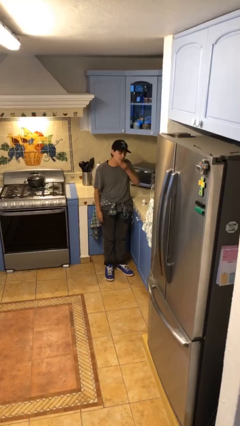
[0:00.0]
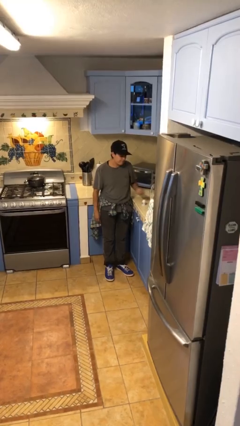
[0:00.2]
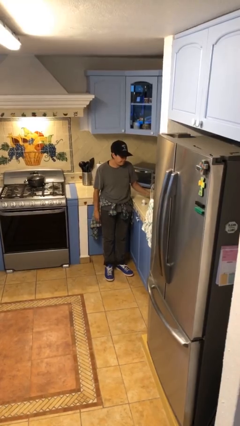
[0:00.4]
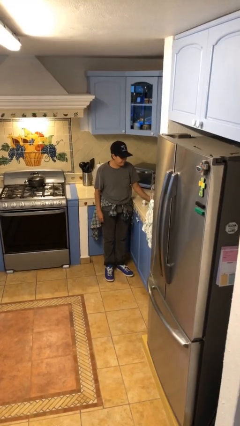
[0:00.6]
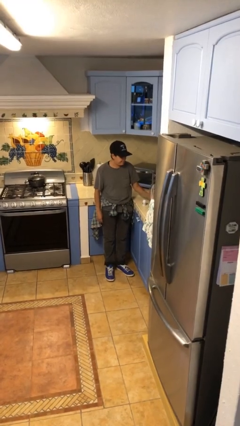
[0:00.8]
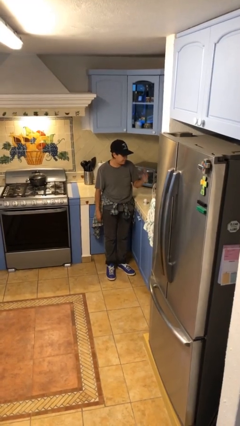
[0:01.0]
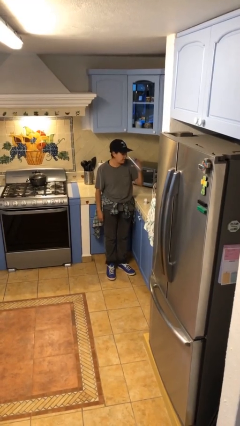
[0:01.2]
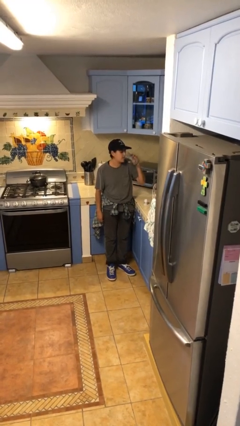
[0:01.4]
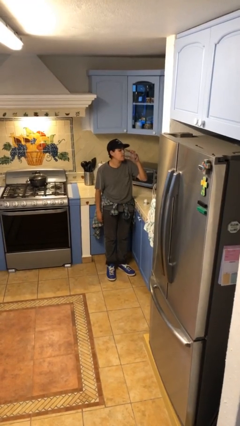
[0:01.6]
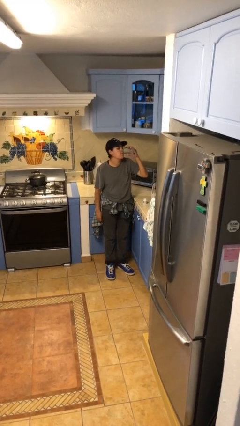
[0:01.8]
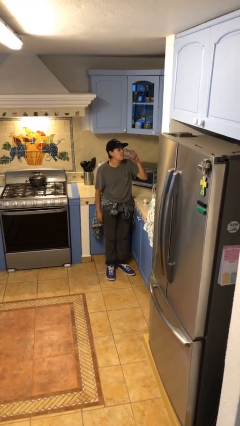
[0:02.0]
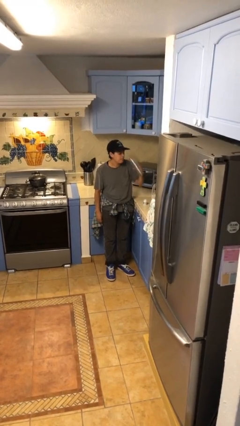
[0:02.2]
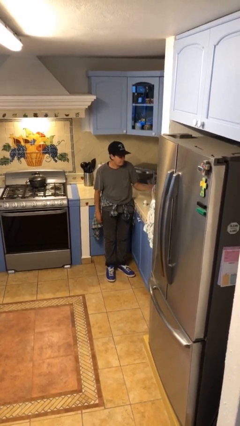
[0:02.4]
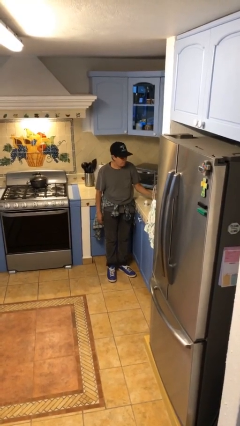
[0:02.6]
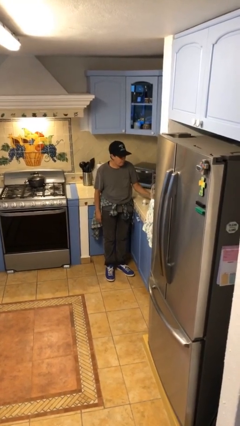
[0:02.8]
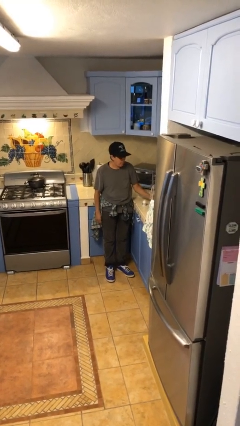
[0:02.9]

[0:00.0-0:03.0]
person drinks from cup

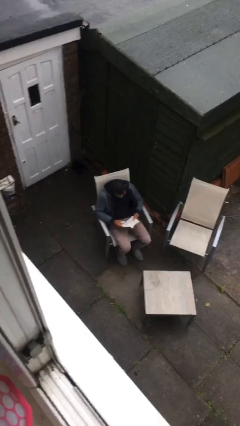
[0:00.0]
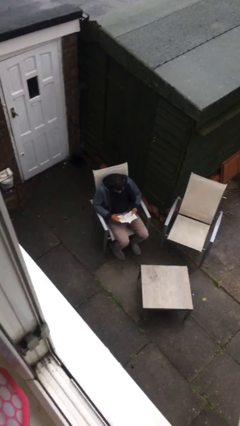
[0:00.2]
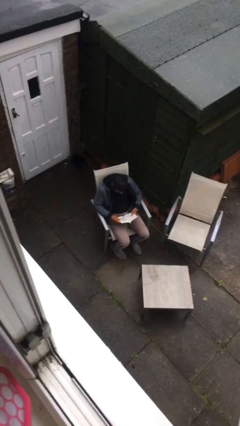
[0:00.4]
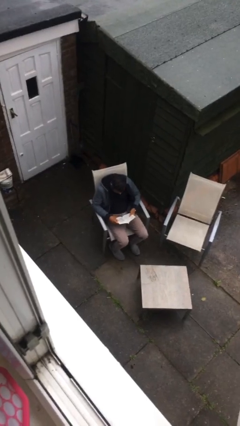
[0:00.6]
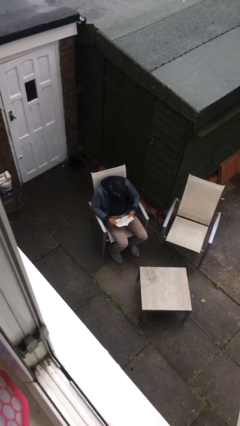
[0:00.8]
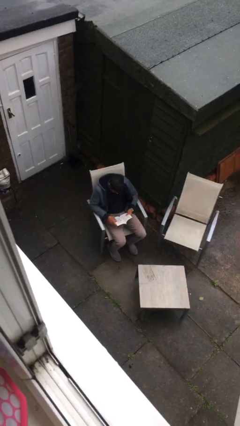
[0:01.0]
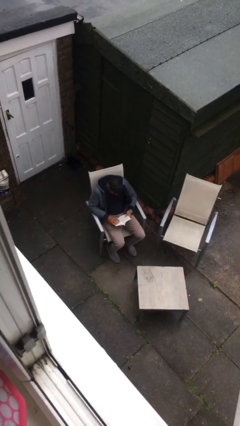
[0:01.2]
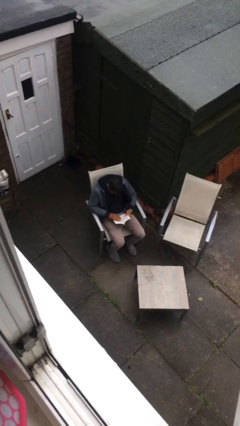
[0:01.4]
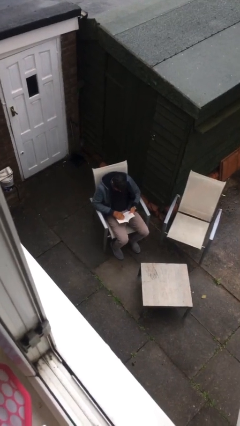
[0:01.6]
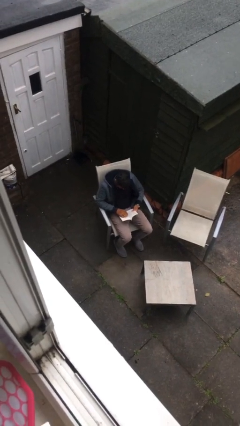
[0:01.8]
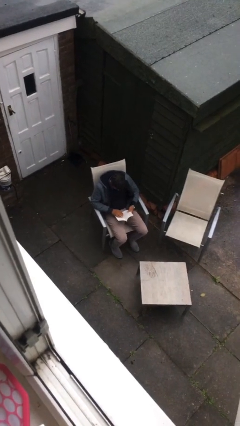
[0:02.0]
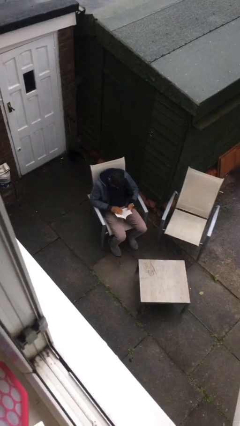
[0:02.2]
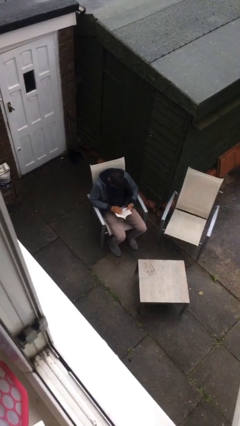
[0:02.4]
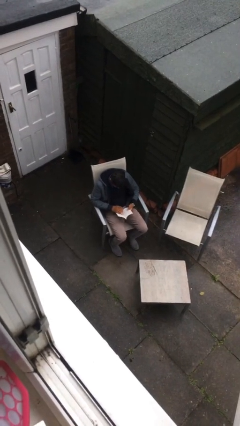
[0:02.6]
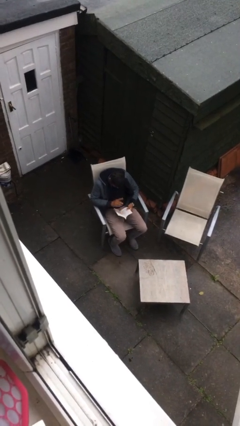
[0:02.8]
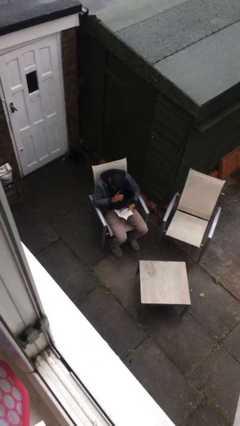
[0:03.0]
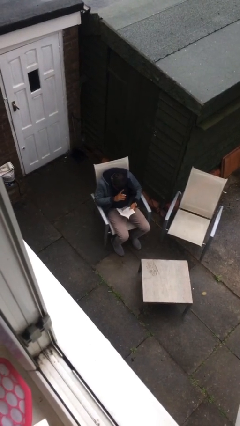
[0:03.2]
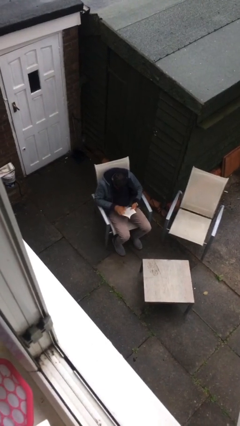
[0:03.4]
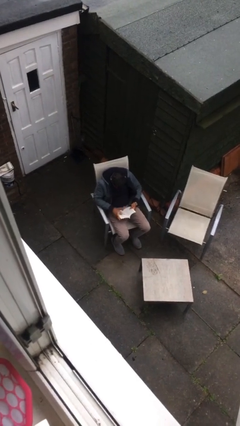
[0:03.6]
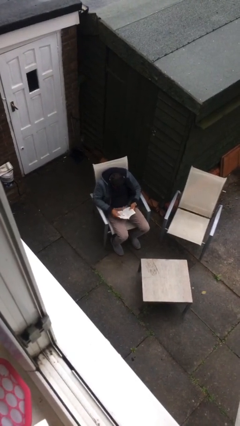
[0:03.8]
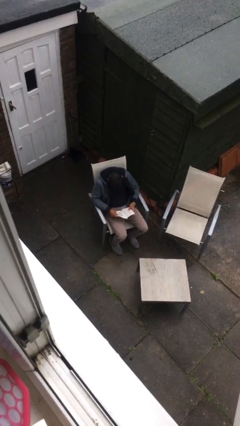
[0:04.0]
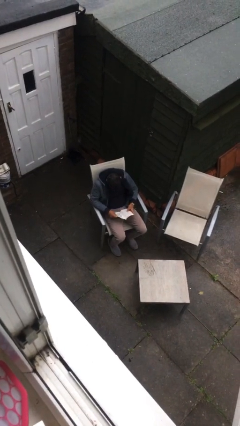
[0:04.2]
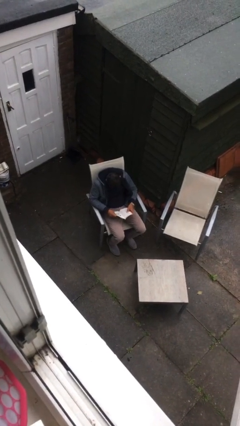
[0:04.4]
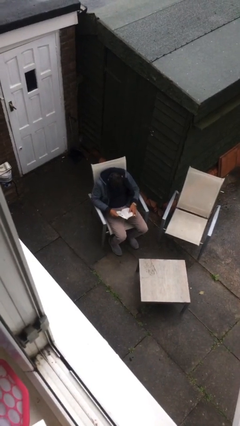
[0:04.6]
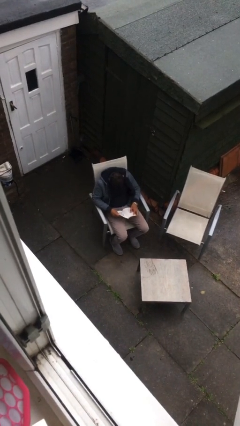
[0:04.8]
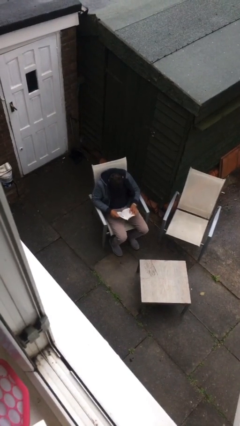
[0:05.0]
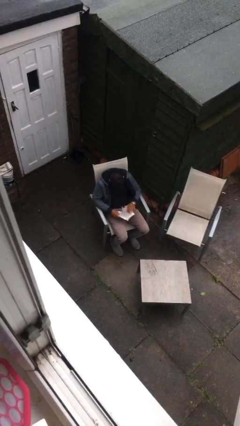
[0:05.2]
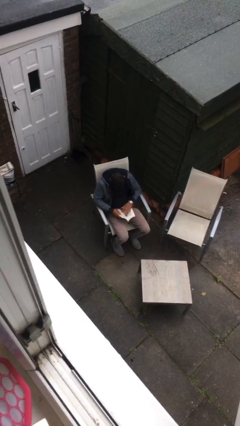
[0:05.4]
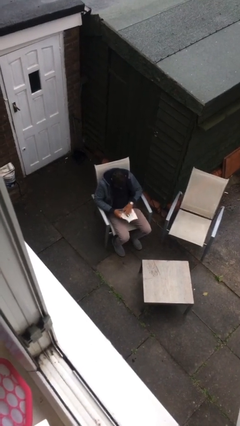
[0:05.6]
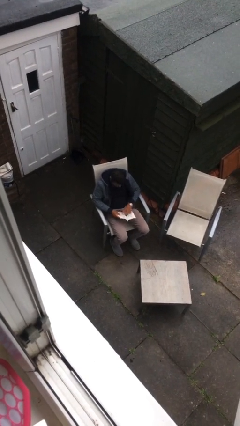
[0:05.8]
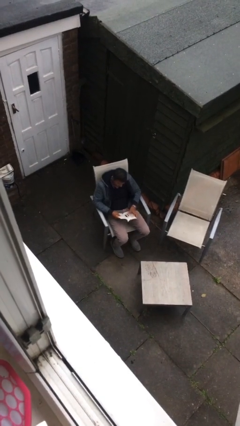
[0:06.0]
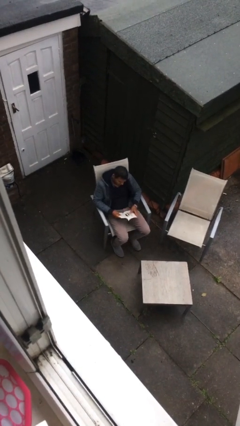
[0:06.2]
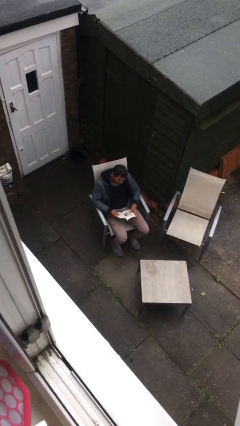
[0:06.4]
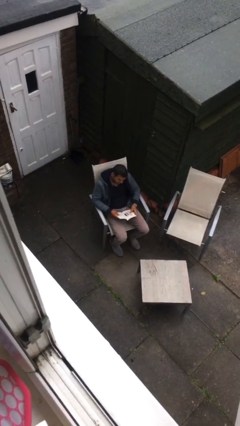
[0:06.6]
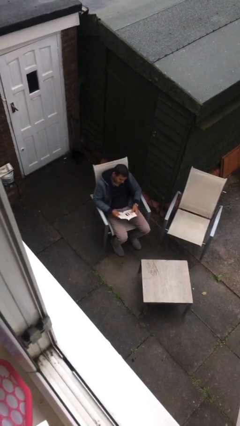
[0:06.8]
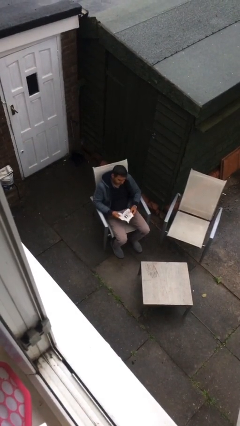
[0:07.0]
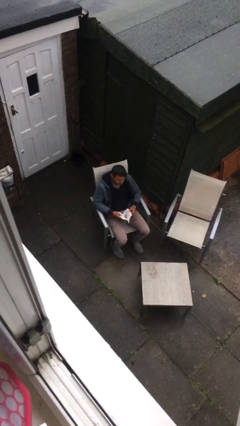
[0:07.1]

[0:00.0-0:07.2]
person reads document

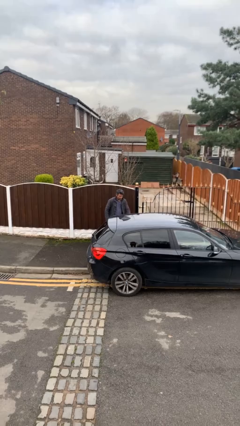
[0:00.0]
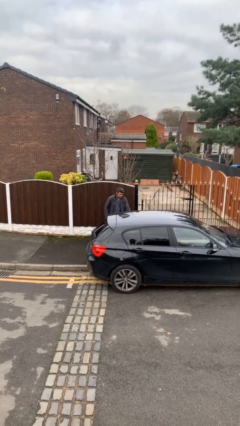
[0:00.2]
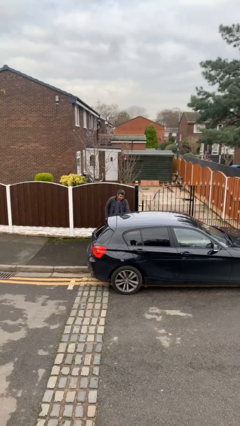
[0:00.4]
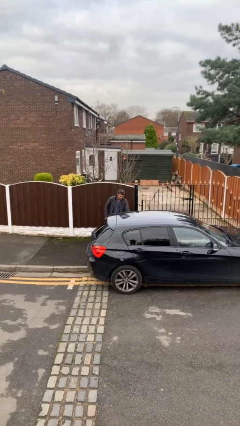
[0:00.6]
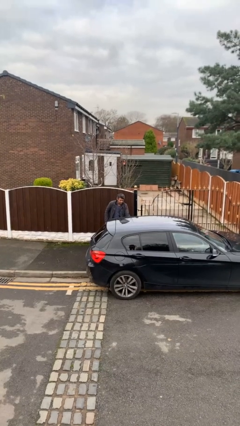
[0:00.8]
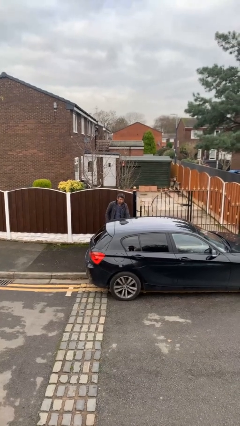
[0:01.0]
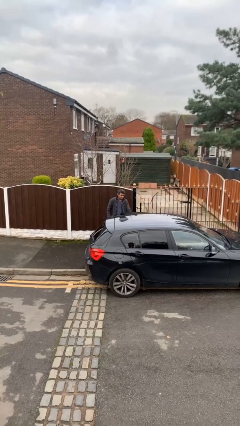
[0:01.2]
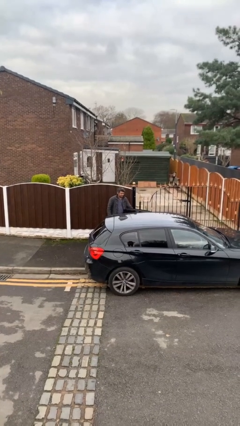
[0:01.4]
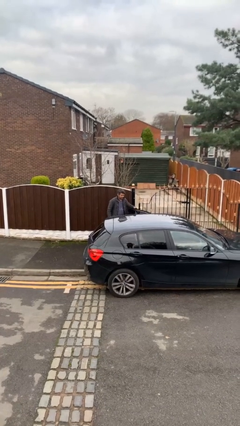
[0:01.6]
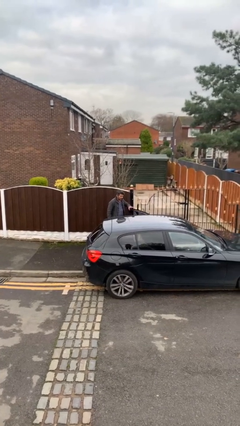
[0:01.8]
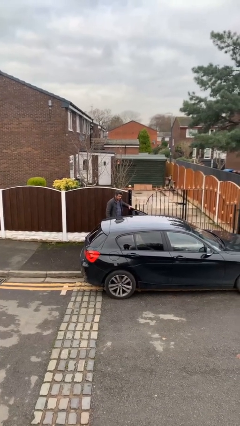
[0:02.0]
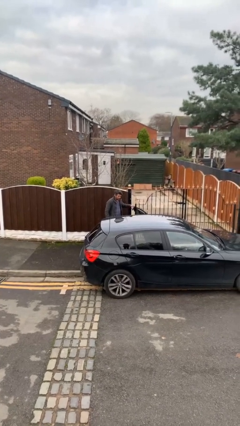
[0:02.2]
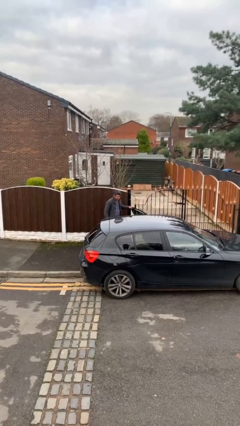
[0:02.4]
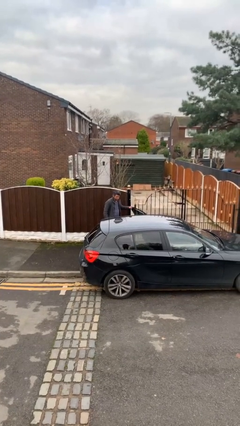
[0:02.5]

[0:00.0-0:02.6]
person opens car door

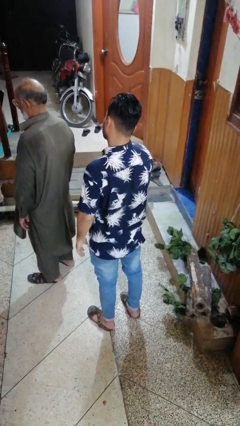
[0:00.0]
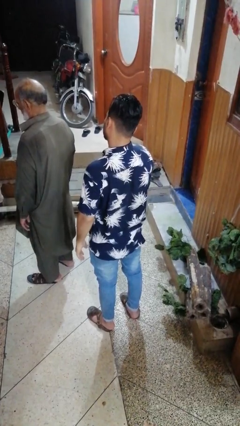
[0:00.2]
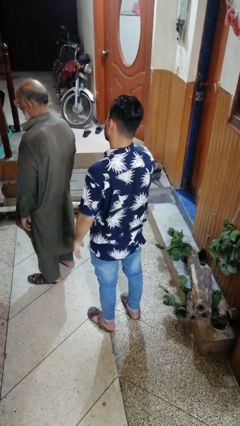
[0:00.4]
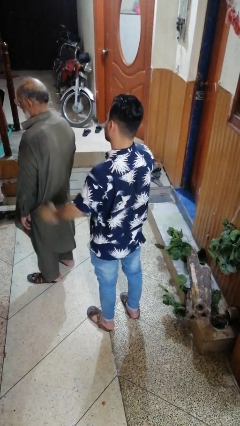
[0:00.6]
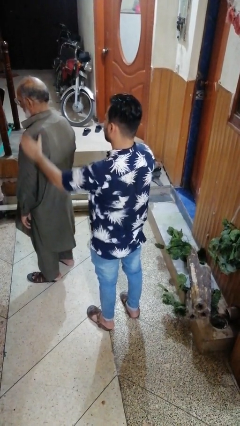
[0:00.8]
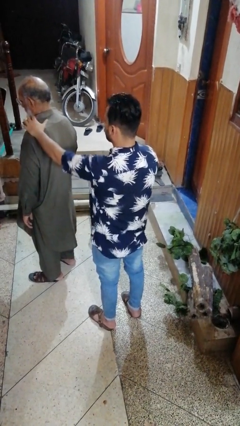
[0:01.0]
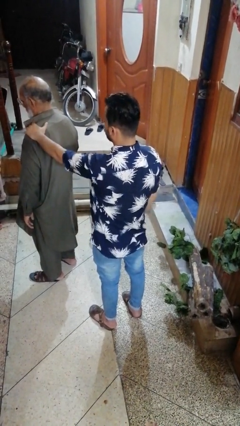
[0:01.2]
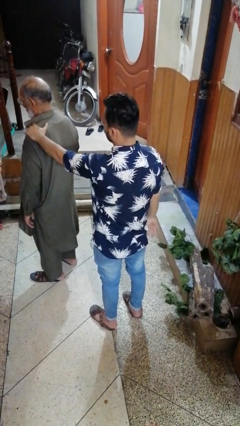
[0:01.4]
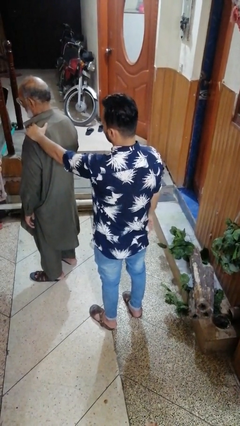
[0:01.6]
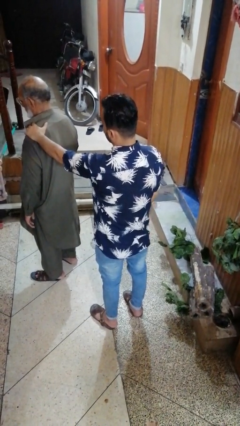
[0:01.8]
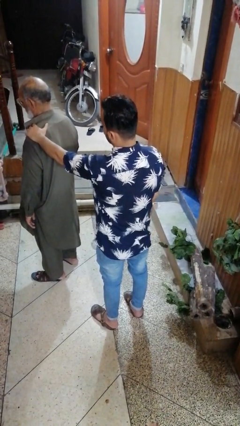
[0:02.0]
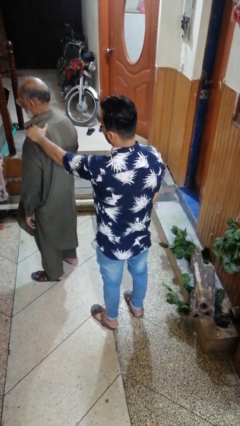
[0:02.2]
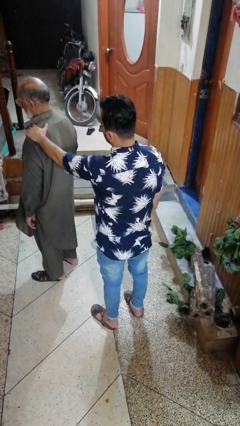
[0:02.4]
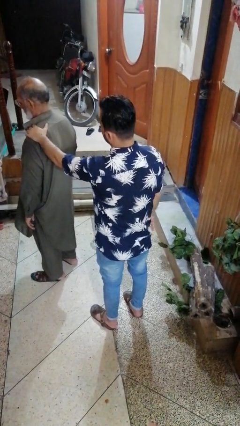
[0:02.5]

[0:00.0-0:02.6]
person grabs person by shoulder

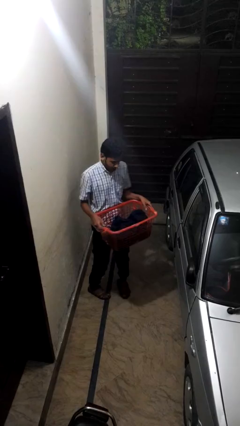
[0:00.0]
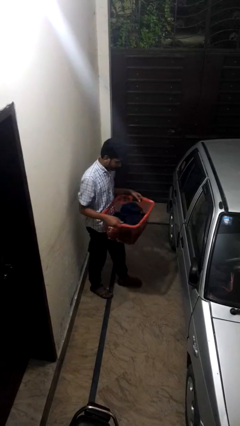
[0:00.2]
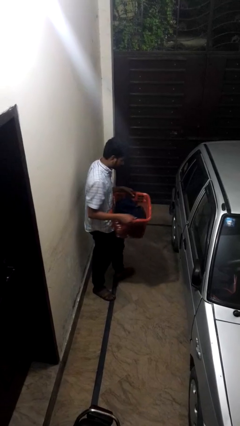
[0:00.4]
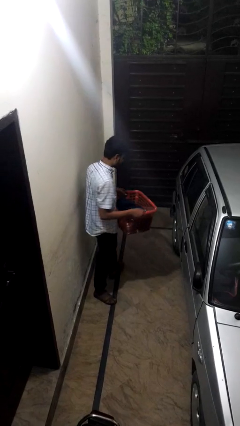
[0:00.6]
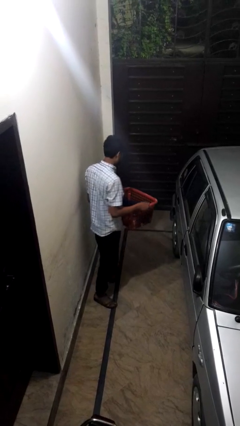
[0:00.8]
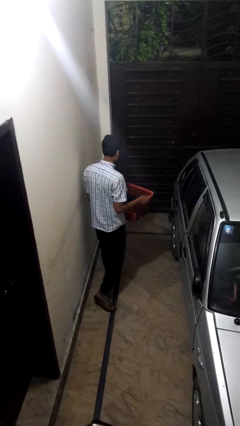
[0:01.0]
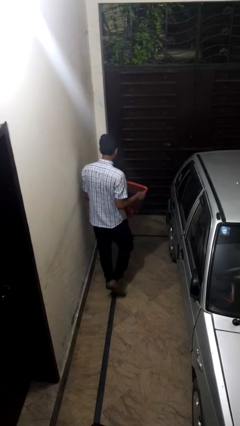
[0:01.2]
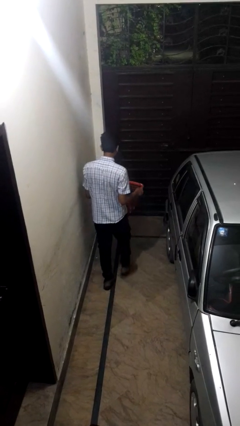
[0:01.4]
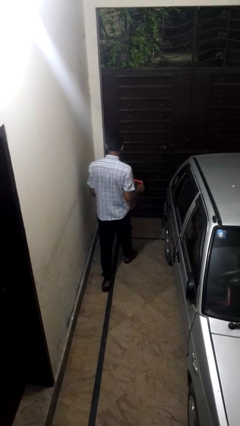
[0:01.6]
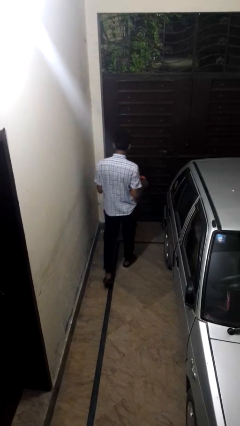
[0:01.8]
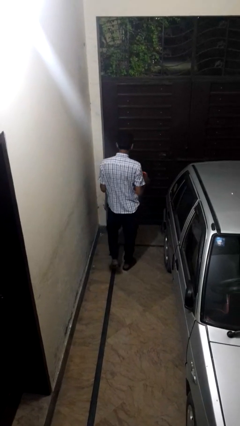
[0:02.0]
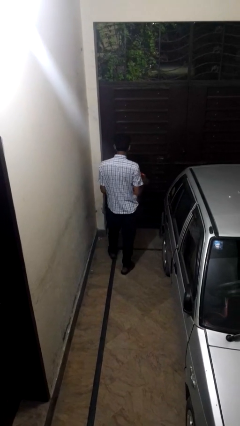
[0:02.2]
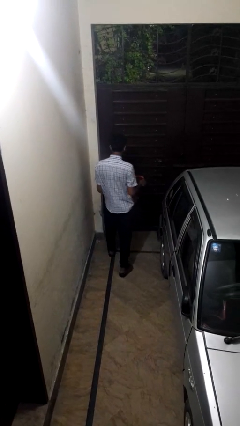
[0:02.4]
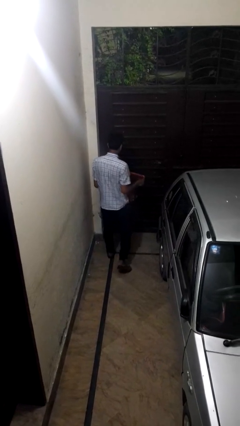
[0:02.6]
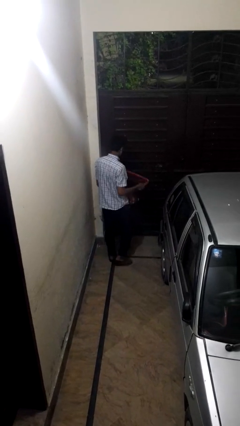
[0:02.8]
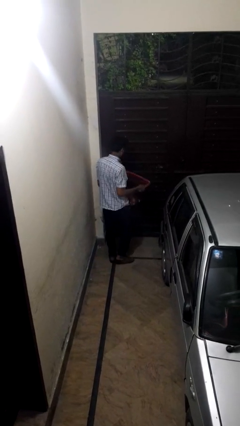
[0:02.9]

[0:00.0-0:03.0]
person carries laundry basket
